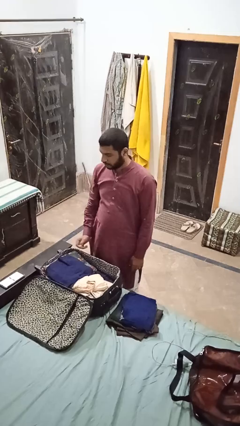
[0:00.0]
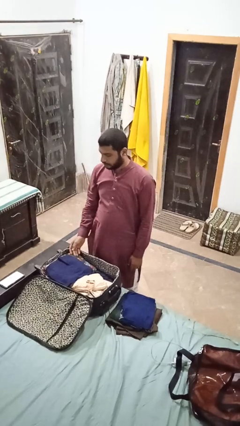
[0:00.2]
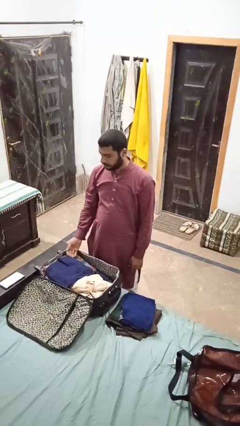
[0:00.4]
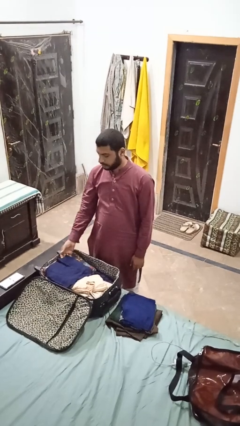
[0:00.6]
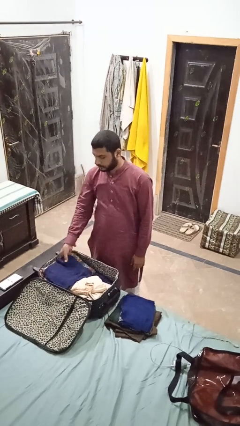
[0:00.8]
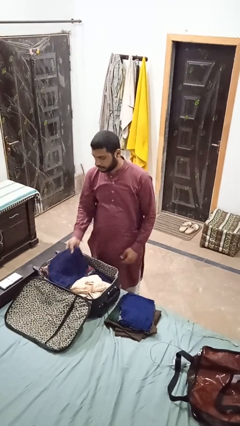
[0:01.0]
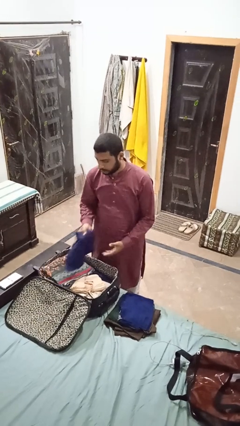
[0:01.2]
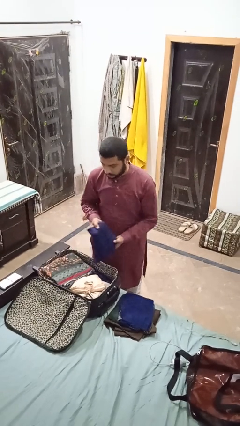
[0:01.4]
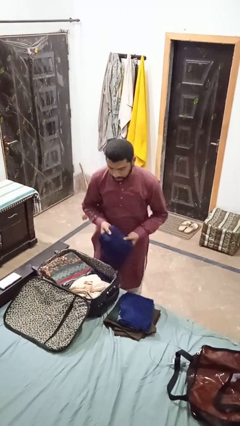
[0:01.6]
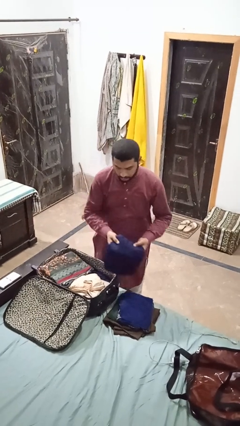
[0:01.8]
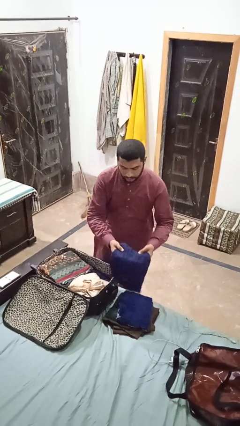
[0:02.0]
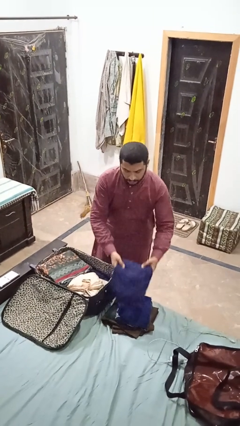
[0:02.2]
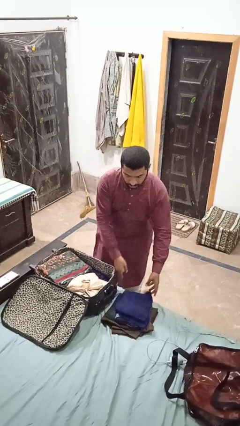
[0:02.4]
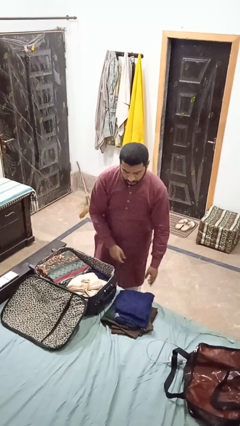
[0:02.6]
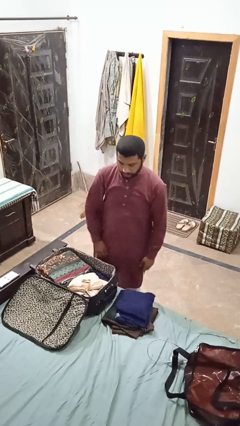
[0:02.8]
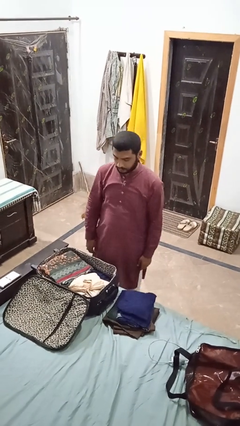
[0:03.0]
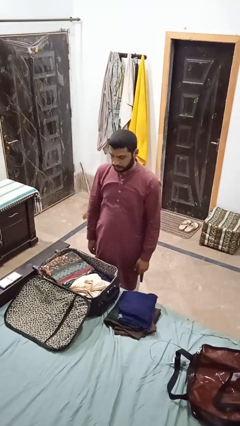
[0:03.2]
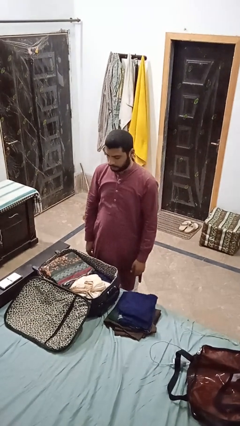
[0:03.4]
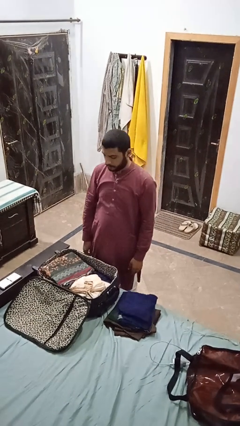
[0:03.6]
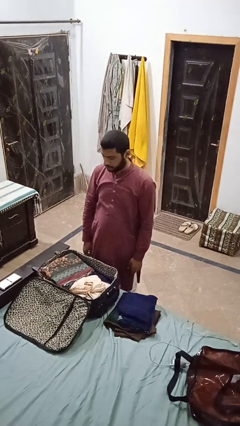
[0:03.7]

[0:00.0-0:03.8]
person unloads clothes from suitcase

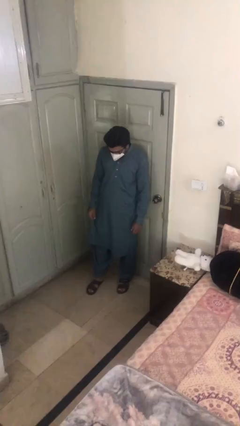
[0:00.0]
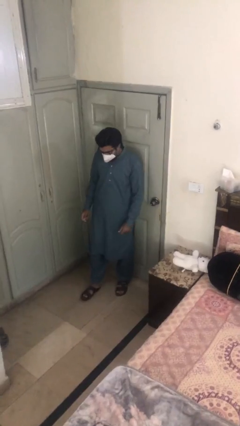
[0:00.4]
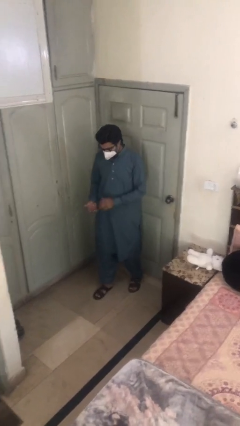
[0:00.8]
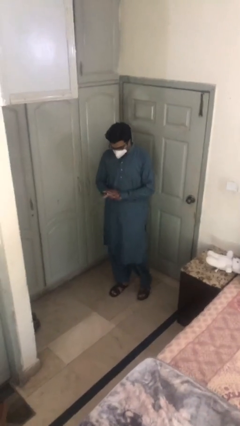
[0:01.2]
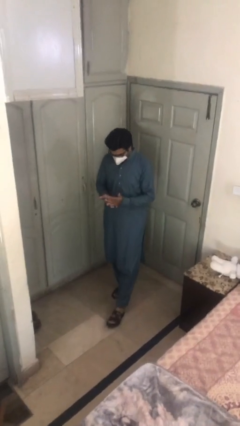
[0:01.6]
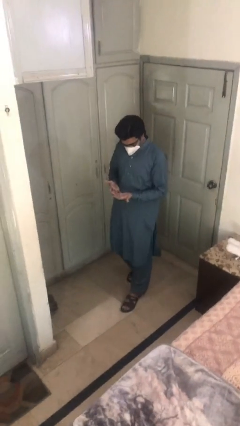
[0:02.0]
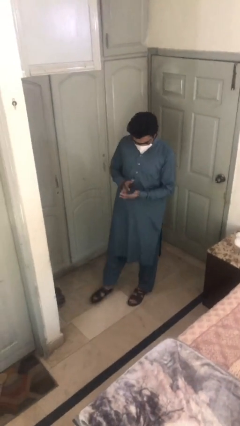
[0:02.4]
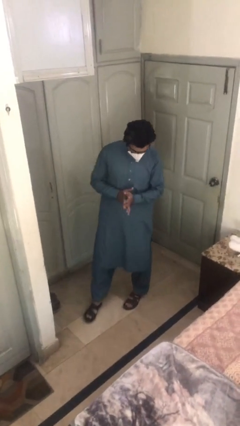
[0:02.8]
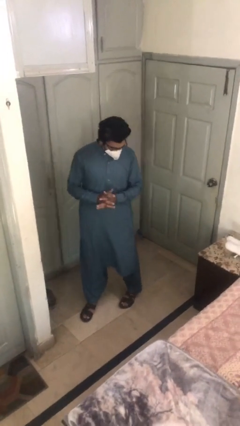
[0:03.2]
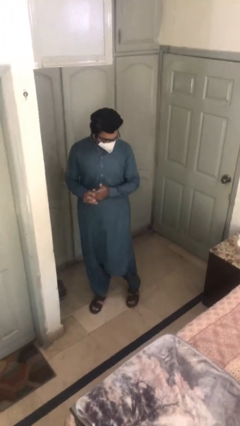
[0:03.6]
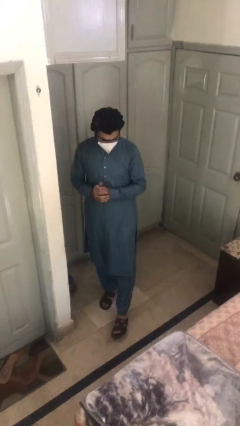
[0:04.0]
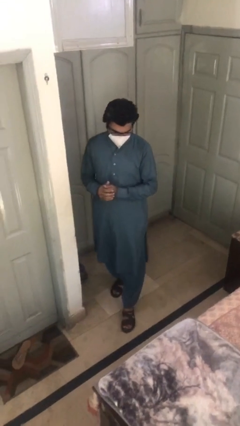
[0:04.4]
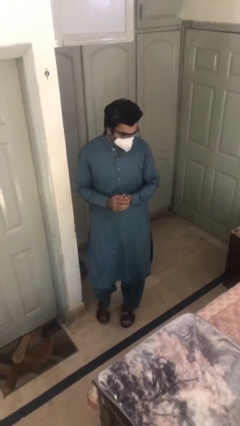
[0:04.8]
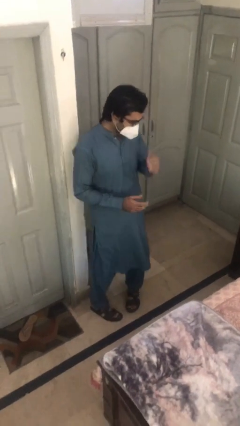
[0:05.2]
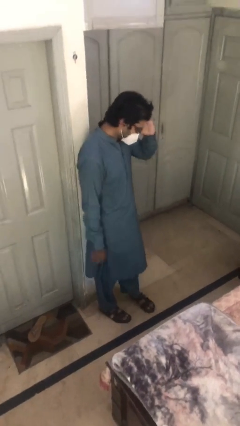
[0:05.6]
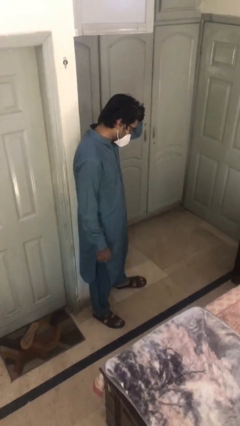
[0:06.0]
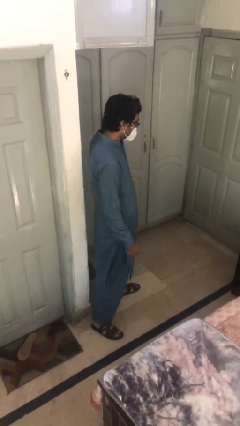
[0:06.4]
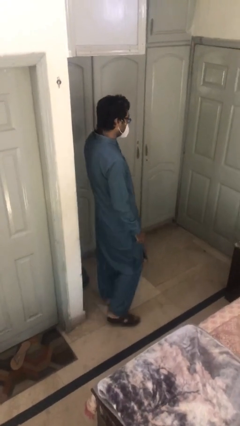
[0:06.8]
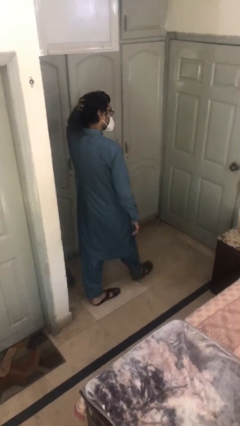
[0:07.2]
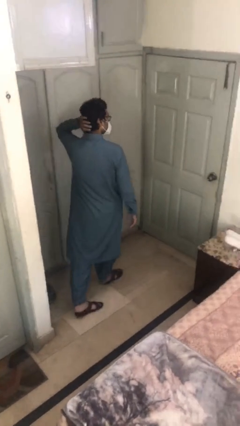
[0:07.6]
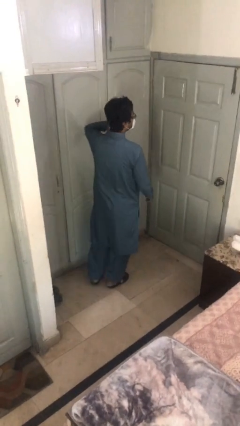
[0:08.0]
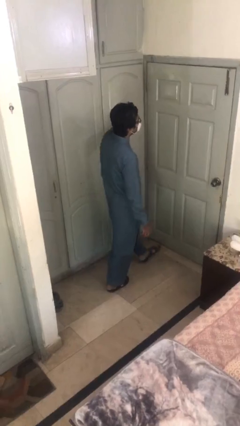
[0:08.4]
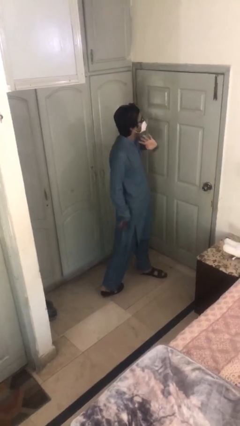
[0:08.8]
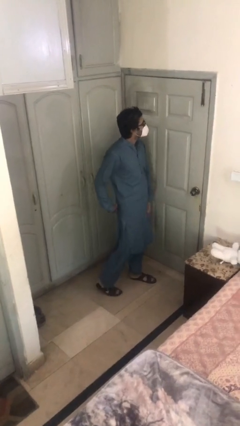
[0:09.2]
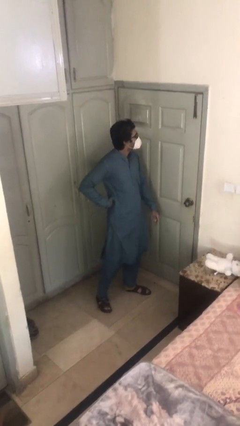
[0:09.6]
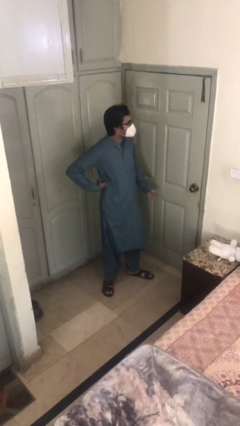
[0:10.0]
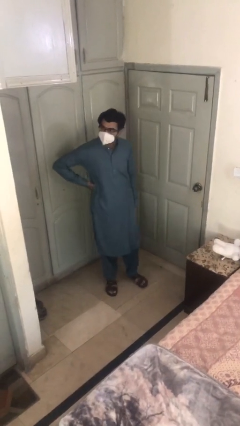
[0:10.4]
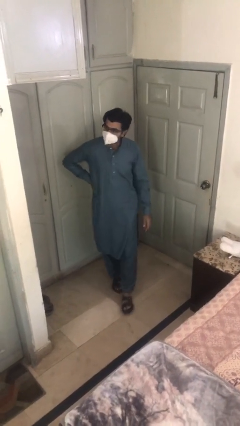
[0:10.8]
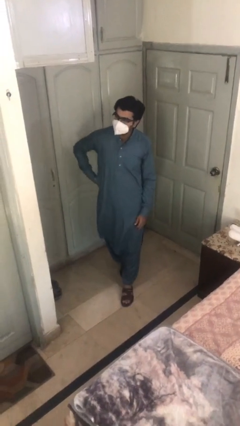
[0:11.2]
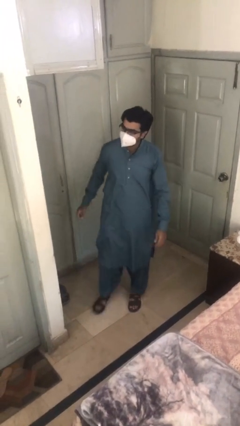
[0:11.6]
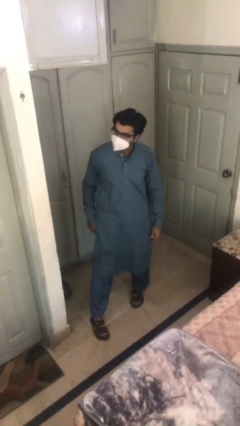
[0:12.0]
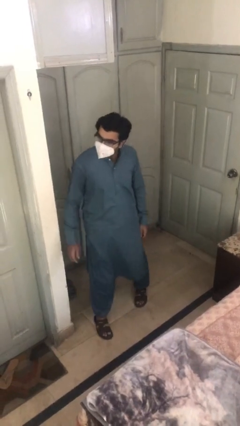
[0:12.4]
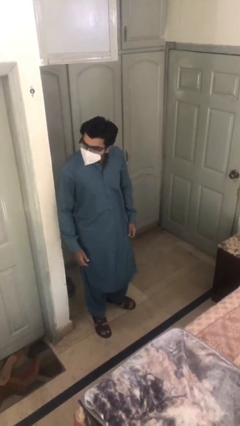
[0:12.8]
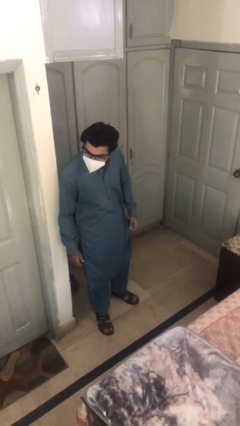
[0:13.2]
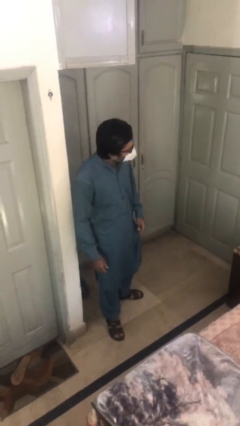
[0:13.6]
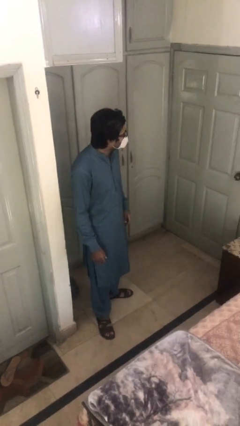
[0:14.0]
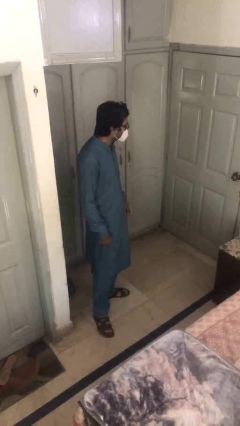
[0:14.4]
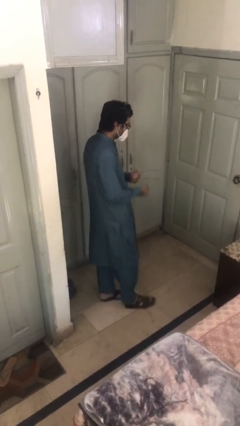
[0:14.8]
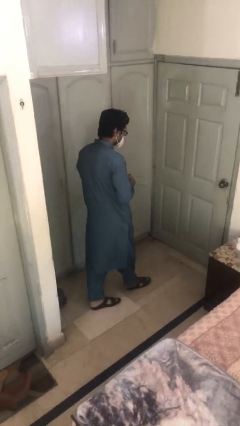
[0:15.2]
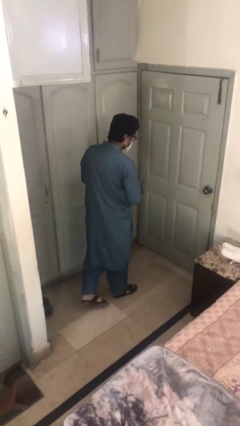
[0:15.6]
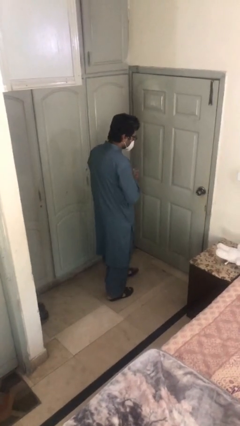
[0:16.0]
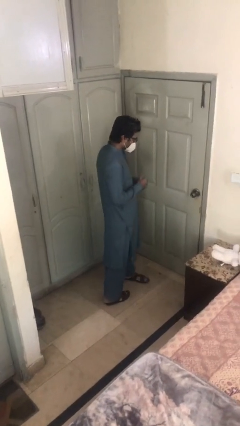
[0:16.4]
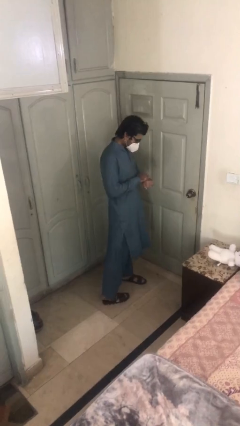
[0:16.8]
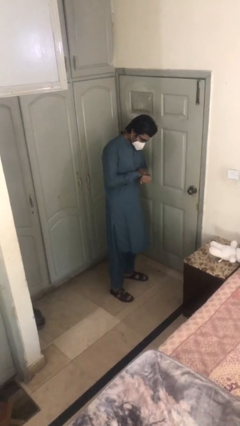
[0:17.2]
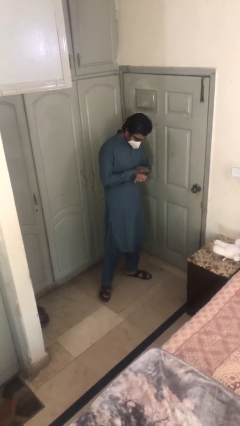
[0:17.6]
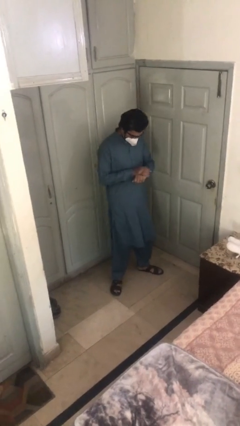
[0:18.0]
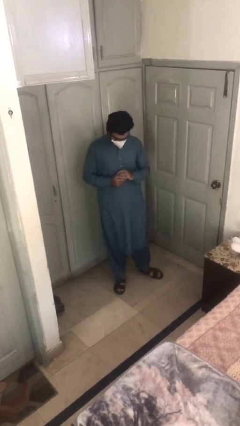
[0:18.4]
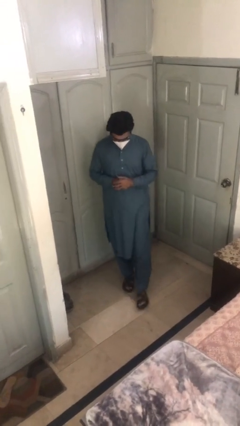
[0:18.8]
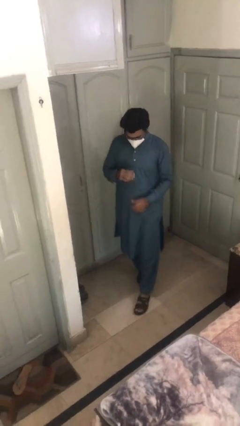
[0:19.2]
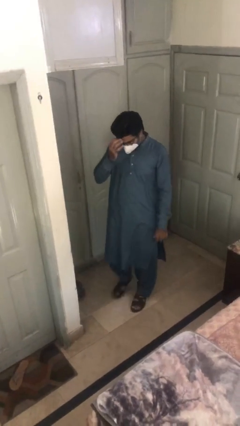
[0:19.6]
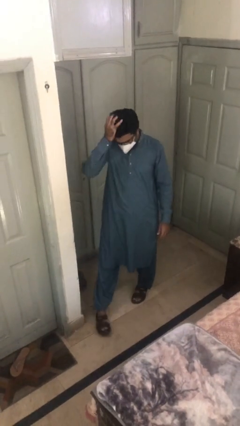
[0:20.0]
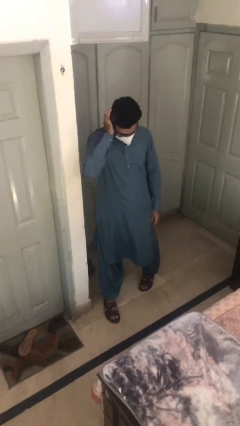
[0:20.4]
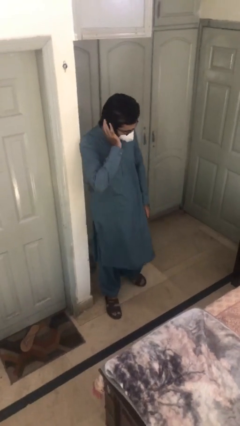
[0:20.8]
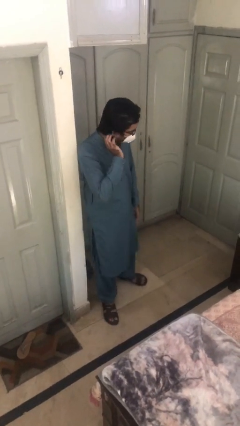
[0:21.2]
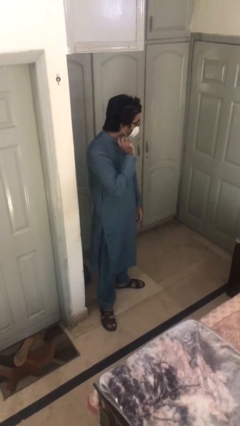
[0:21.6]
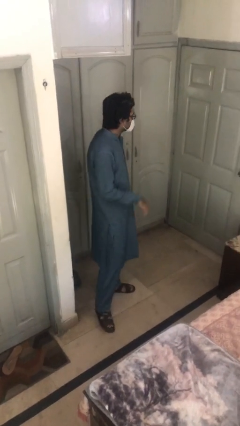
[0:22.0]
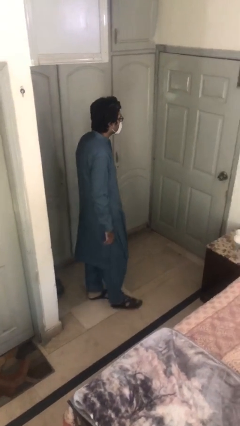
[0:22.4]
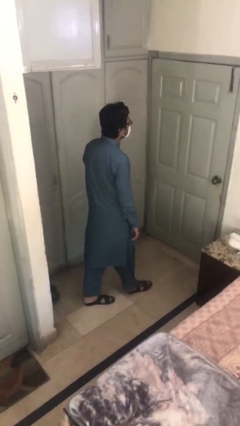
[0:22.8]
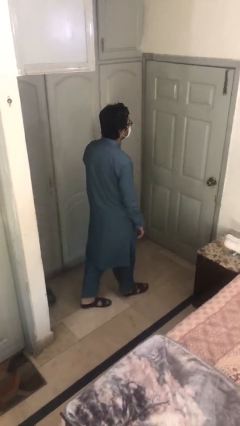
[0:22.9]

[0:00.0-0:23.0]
person walks

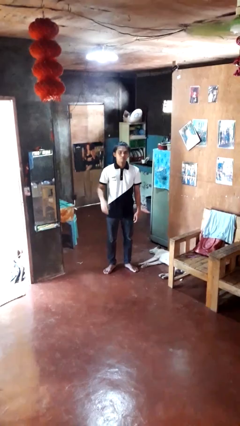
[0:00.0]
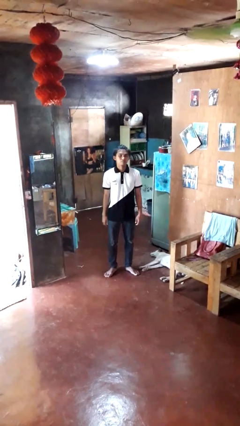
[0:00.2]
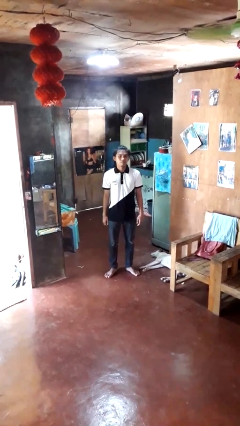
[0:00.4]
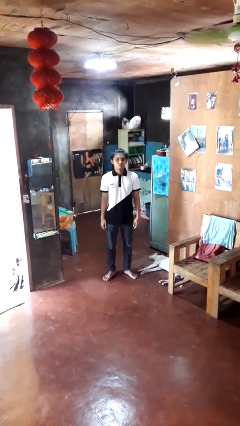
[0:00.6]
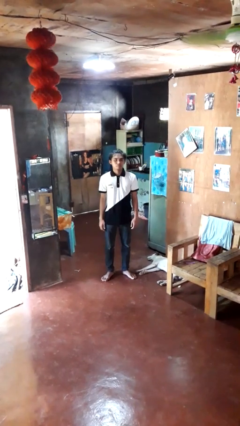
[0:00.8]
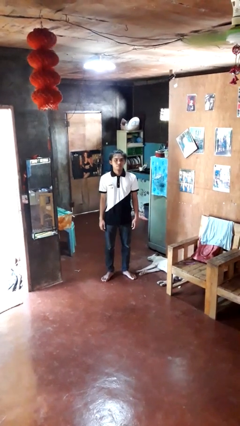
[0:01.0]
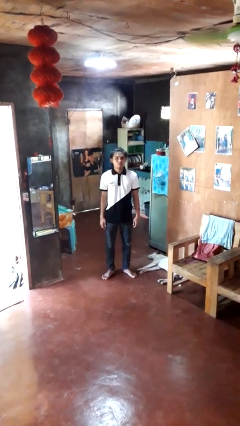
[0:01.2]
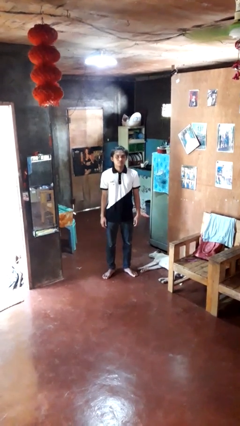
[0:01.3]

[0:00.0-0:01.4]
person gestures lower hand

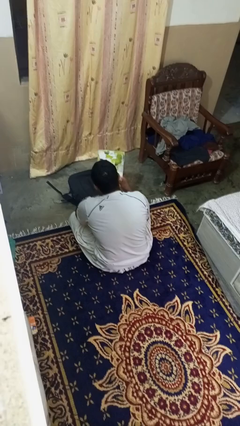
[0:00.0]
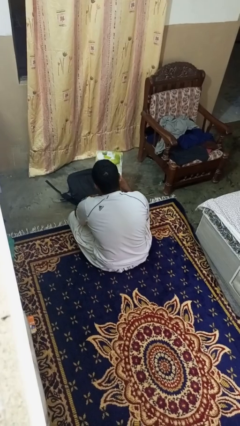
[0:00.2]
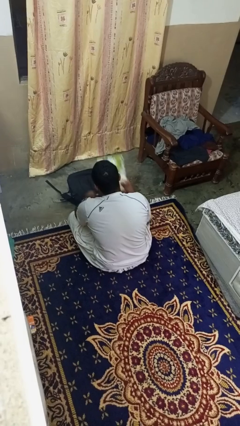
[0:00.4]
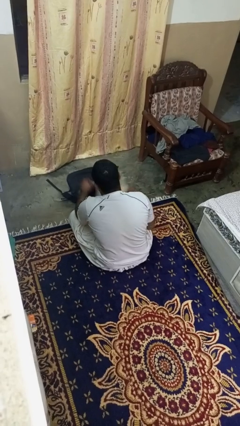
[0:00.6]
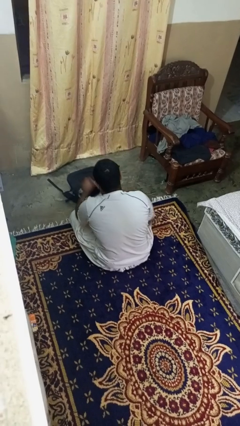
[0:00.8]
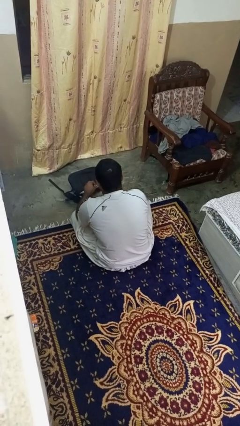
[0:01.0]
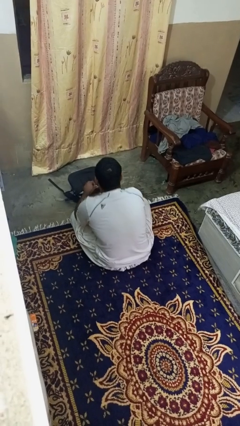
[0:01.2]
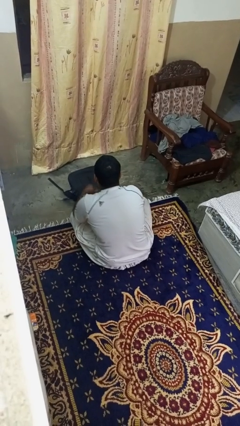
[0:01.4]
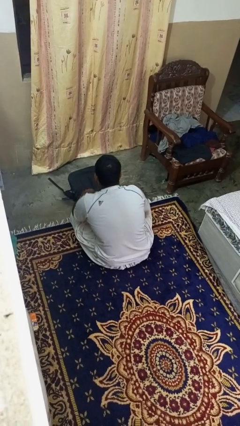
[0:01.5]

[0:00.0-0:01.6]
person puts object into bag
